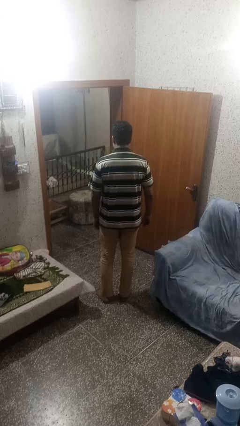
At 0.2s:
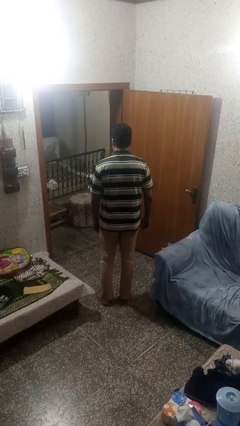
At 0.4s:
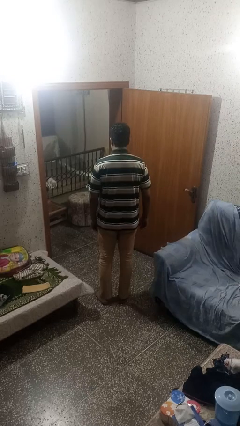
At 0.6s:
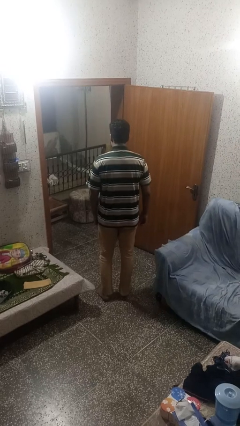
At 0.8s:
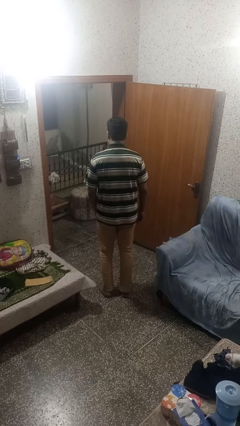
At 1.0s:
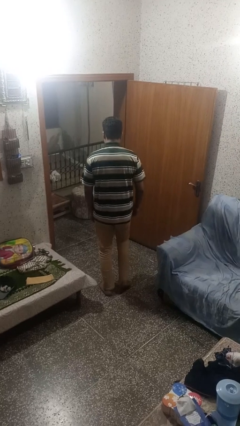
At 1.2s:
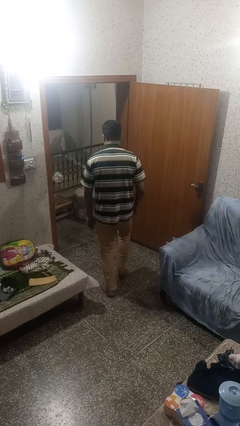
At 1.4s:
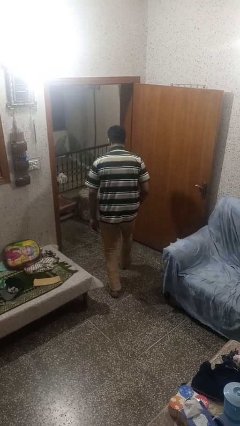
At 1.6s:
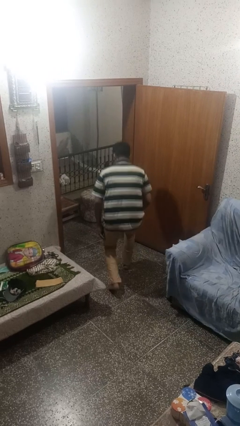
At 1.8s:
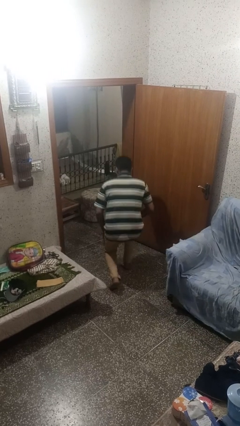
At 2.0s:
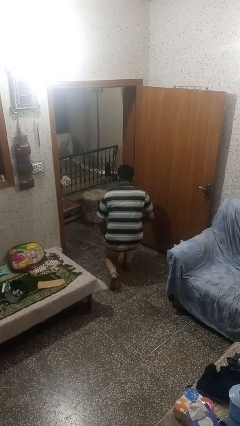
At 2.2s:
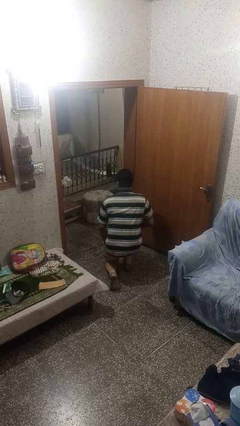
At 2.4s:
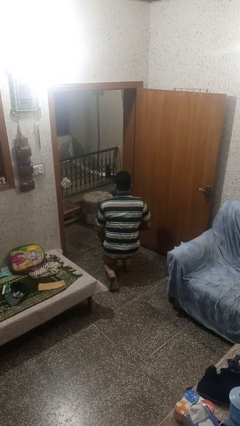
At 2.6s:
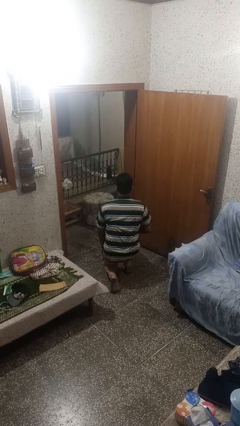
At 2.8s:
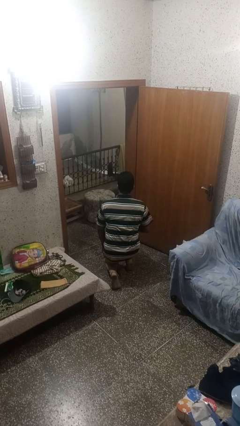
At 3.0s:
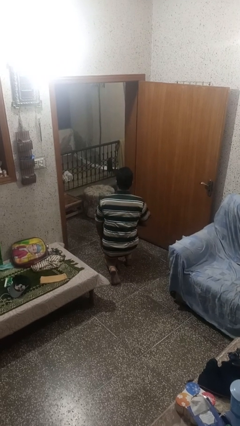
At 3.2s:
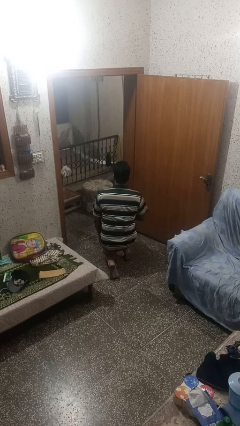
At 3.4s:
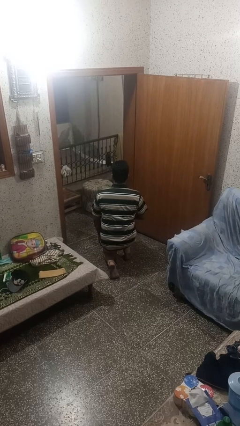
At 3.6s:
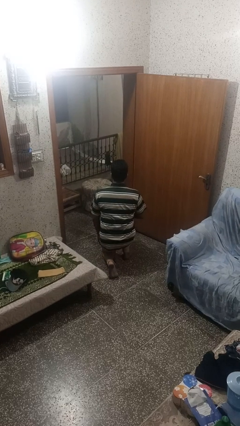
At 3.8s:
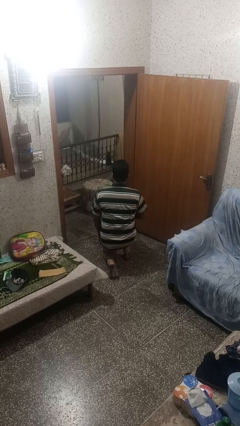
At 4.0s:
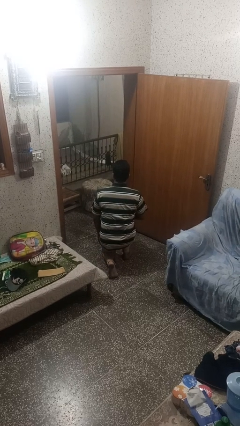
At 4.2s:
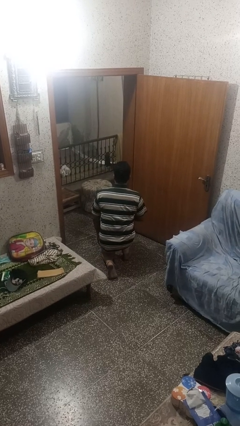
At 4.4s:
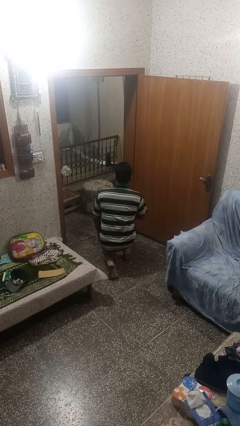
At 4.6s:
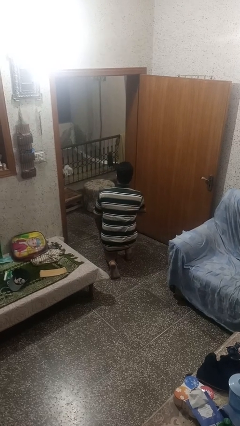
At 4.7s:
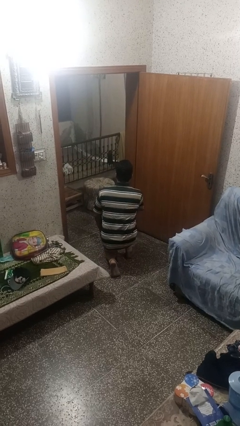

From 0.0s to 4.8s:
person kneels

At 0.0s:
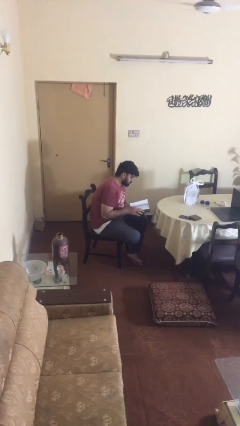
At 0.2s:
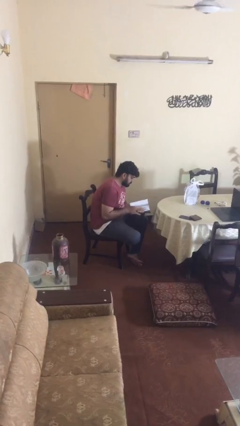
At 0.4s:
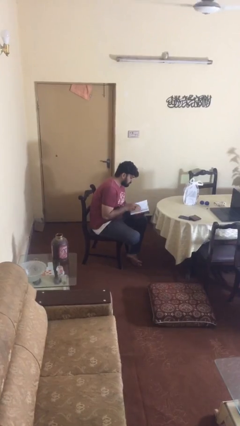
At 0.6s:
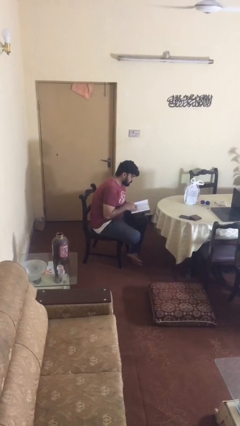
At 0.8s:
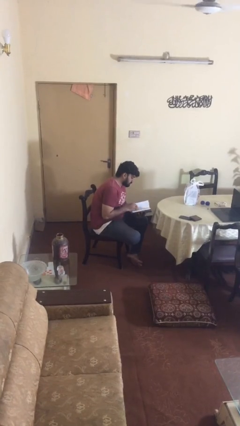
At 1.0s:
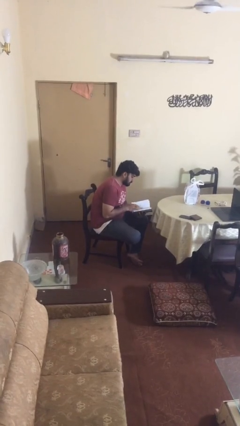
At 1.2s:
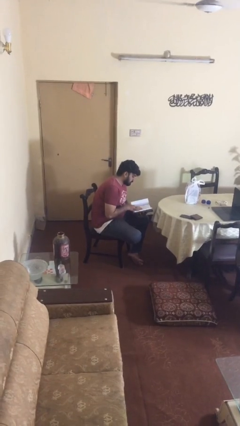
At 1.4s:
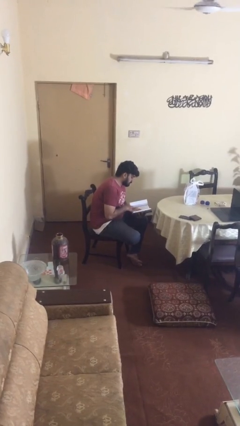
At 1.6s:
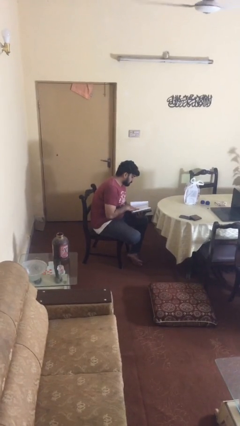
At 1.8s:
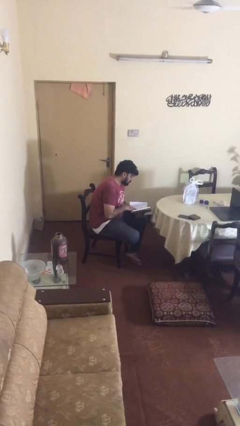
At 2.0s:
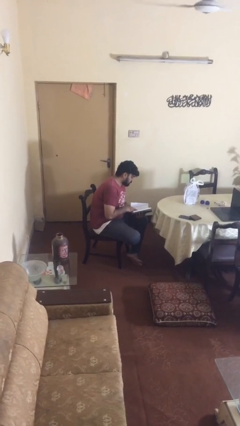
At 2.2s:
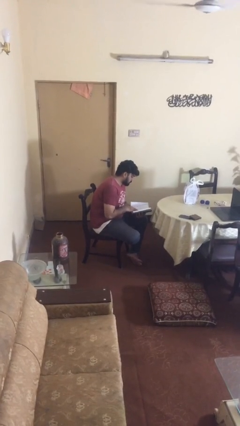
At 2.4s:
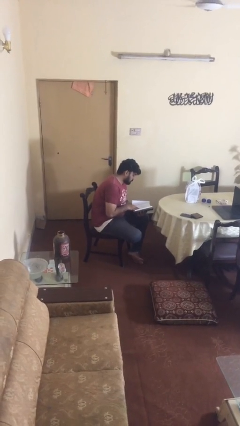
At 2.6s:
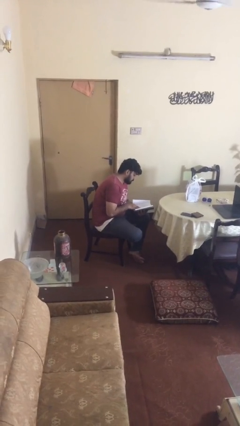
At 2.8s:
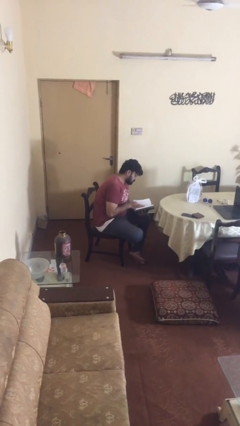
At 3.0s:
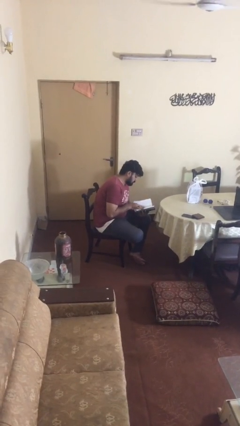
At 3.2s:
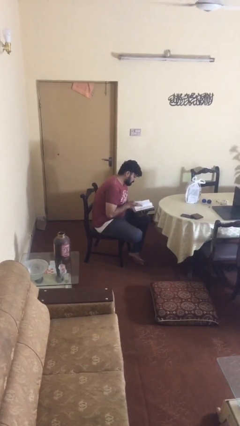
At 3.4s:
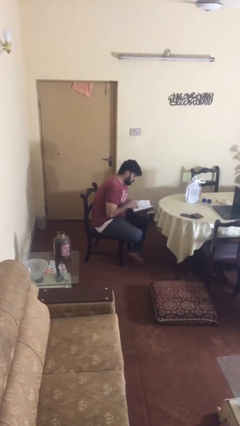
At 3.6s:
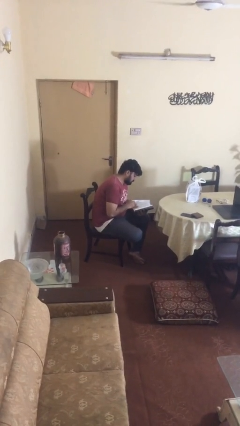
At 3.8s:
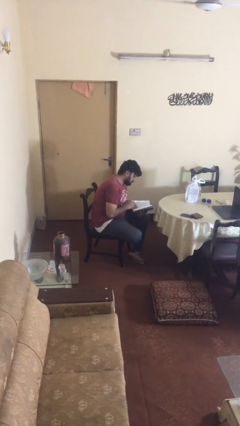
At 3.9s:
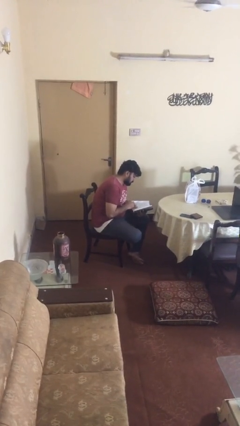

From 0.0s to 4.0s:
person reads document

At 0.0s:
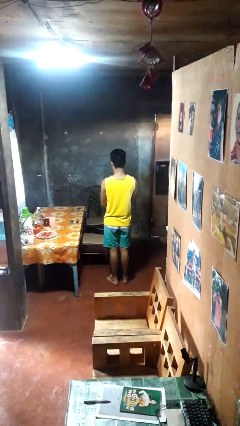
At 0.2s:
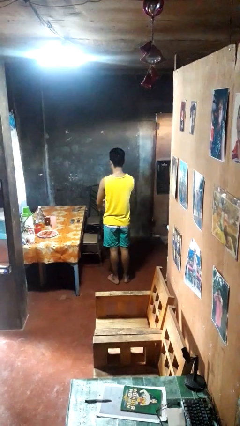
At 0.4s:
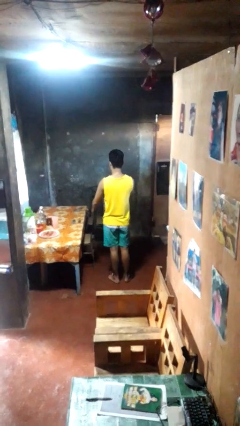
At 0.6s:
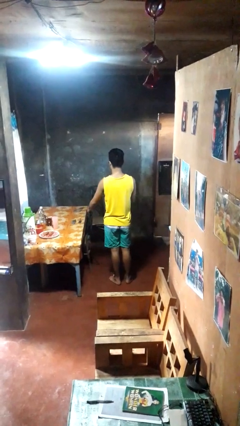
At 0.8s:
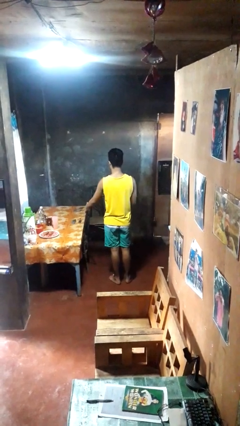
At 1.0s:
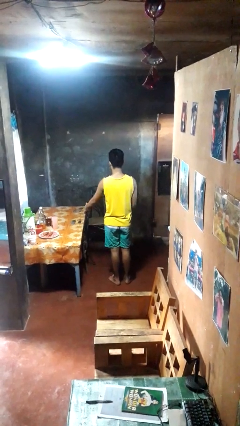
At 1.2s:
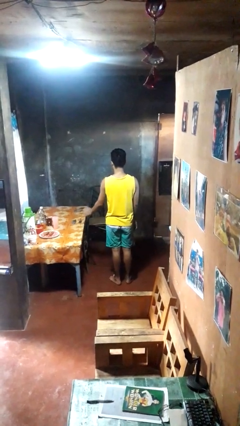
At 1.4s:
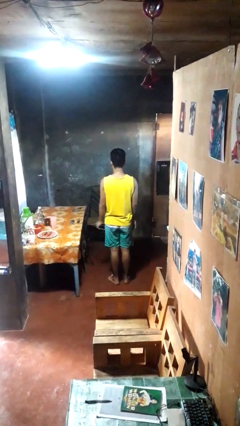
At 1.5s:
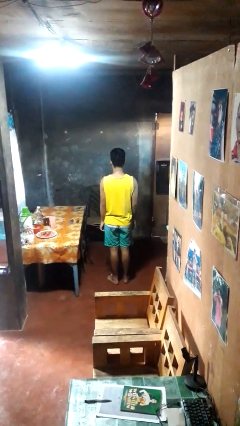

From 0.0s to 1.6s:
person pushes in chair

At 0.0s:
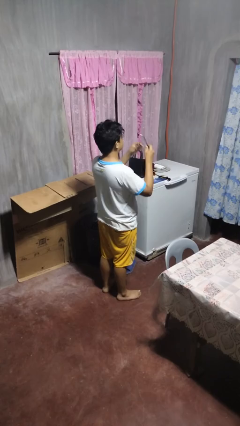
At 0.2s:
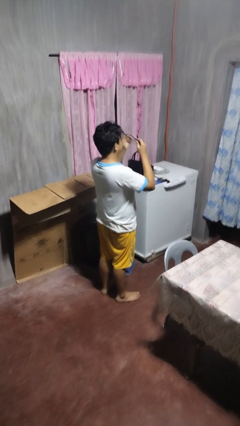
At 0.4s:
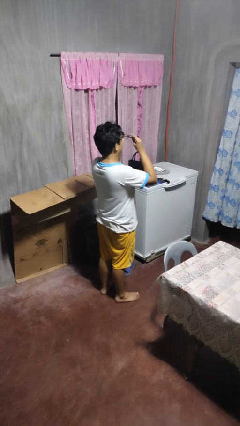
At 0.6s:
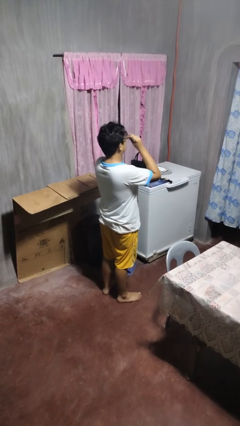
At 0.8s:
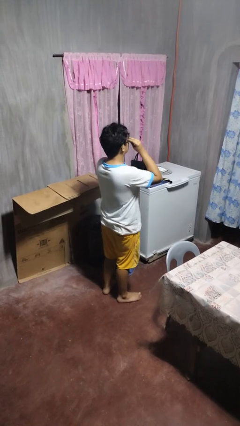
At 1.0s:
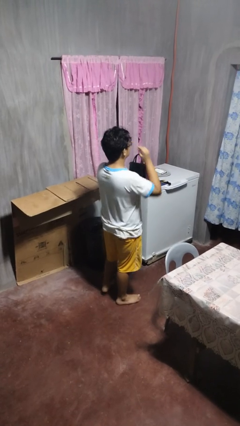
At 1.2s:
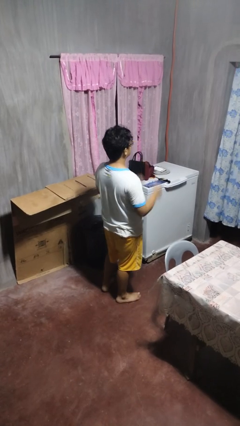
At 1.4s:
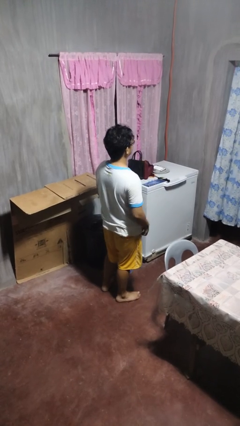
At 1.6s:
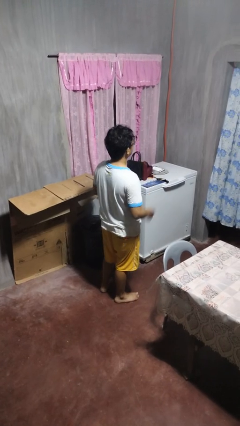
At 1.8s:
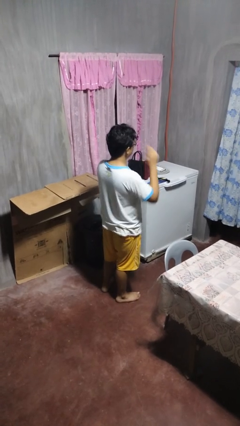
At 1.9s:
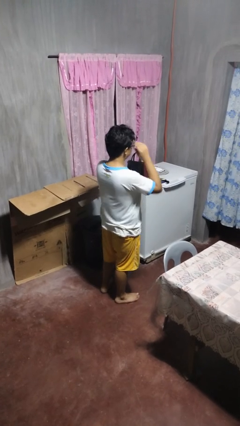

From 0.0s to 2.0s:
person puts on glasses

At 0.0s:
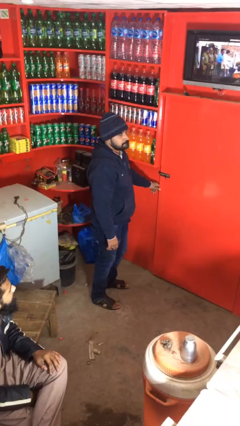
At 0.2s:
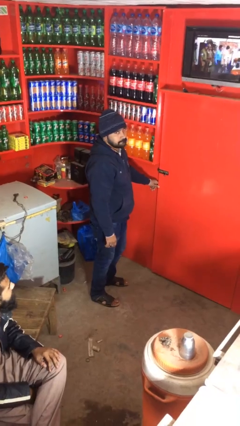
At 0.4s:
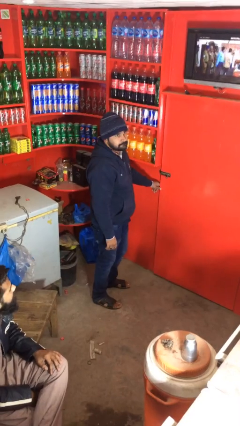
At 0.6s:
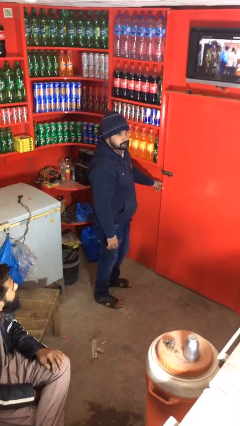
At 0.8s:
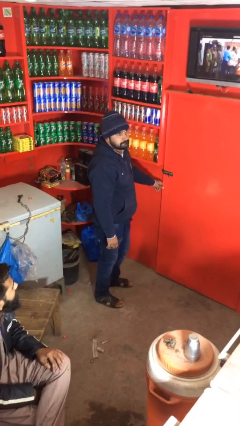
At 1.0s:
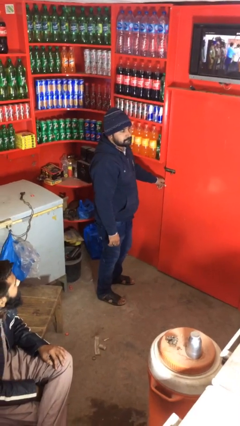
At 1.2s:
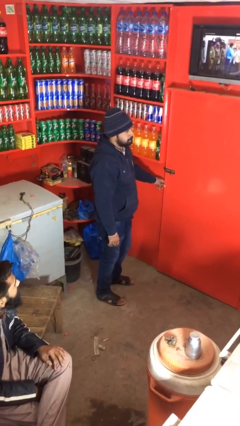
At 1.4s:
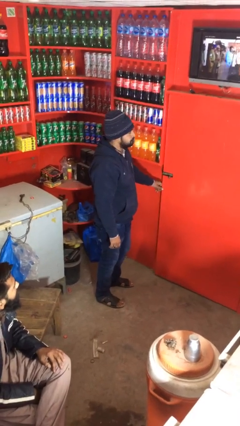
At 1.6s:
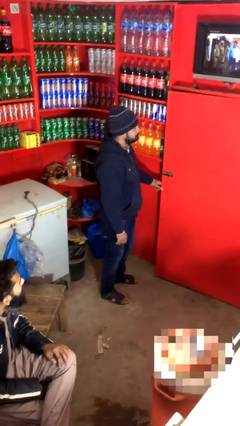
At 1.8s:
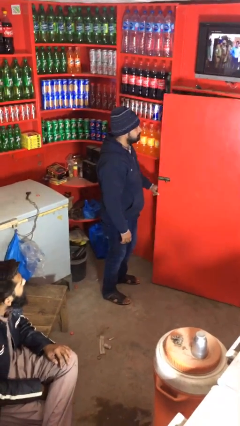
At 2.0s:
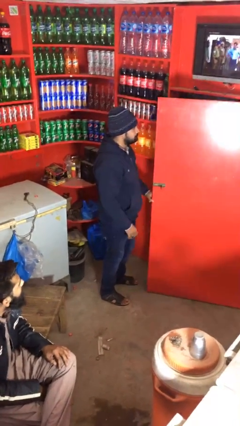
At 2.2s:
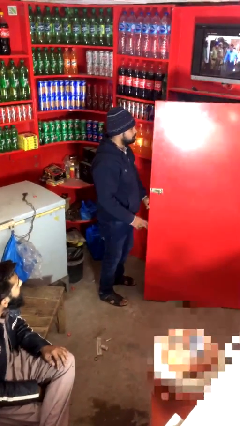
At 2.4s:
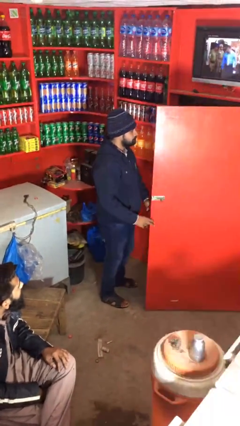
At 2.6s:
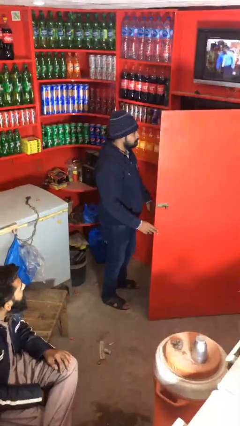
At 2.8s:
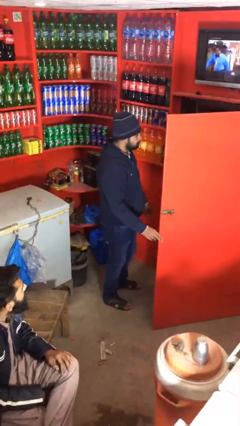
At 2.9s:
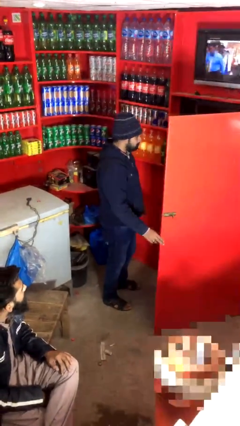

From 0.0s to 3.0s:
person opens facility door

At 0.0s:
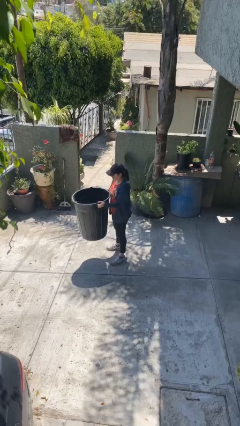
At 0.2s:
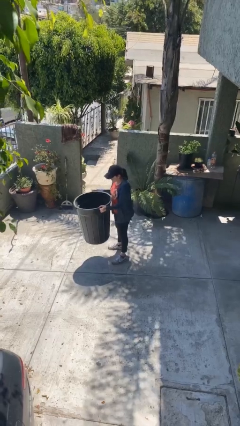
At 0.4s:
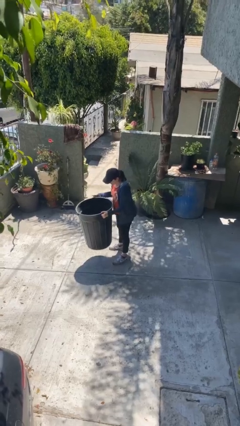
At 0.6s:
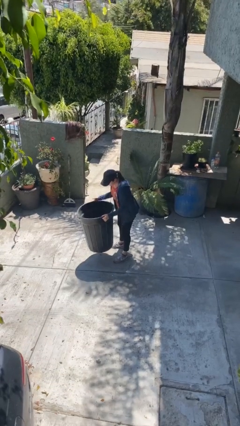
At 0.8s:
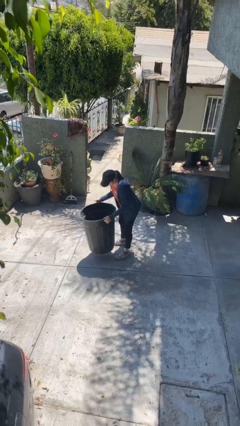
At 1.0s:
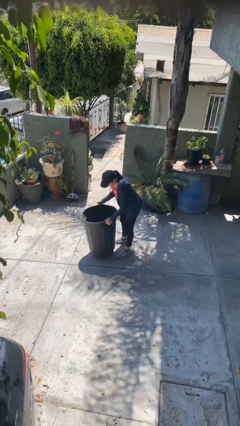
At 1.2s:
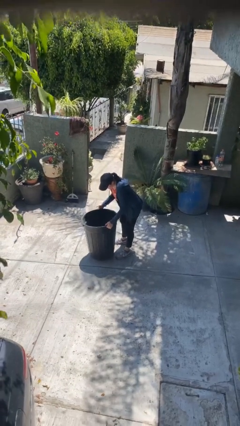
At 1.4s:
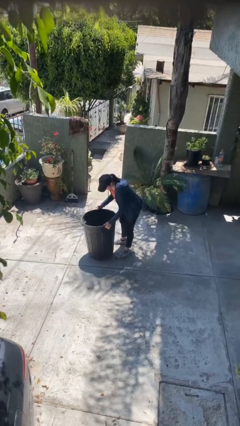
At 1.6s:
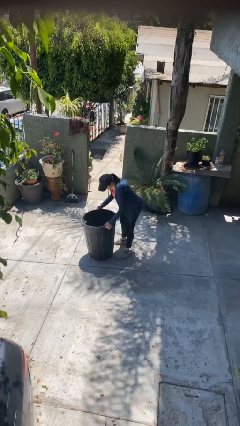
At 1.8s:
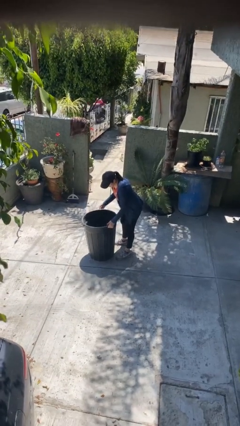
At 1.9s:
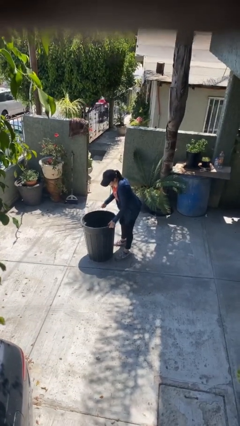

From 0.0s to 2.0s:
person puts down object on floor
